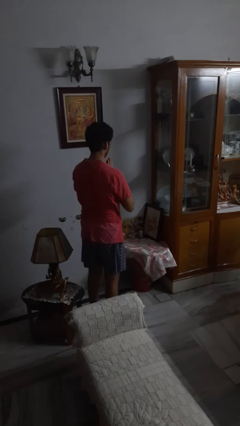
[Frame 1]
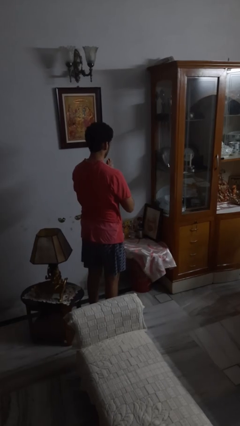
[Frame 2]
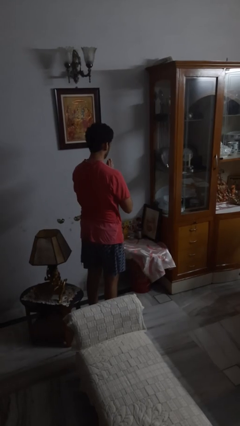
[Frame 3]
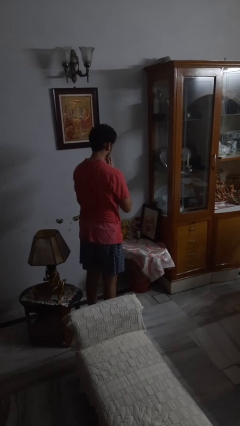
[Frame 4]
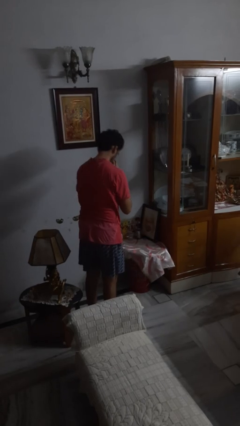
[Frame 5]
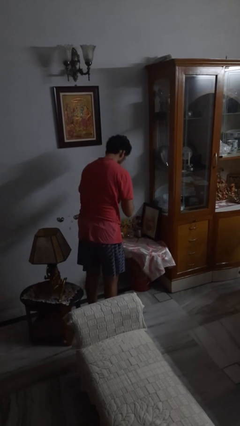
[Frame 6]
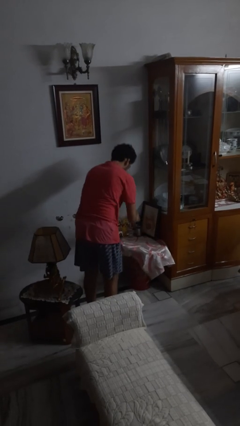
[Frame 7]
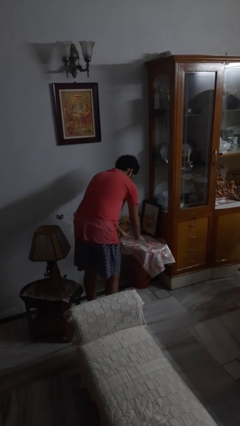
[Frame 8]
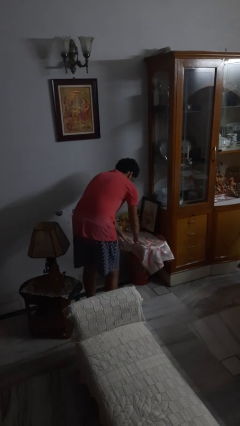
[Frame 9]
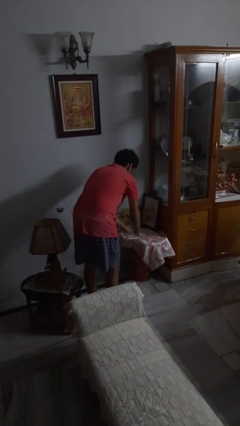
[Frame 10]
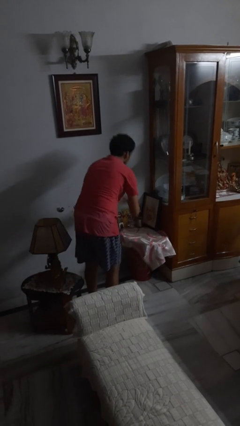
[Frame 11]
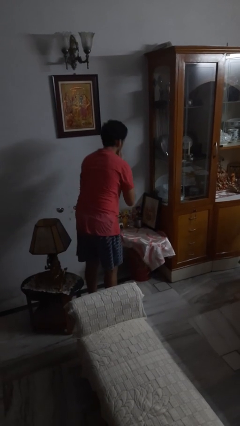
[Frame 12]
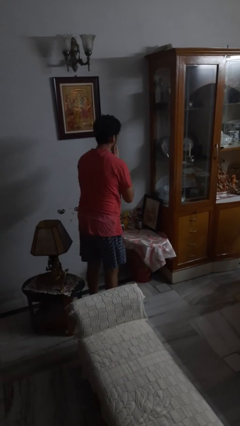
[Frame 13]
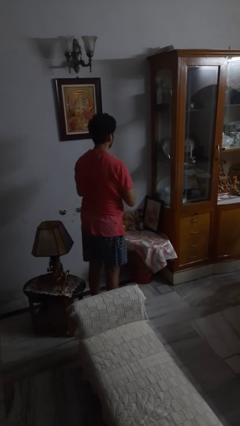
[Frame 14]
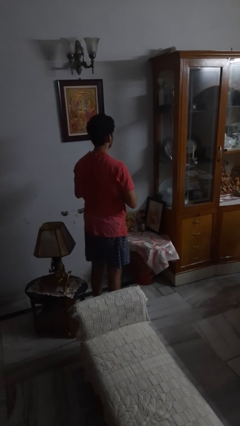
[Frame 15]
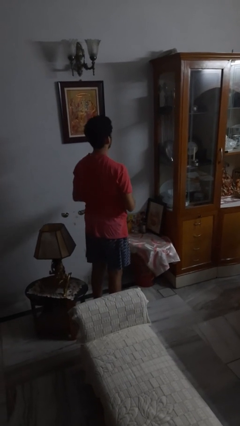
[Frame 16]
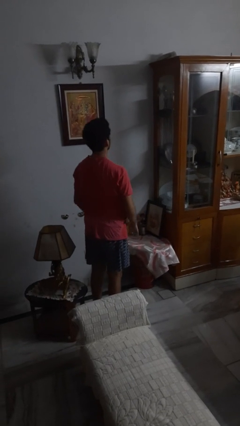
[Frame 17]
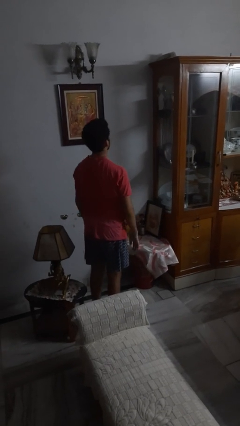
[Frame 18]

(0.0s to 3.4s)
person prays

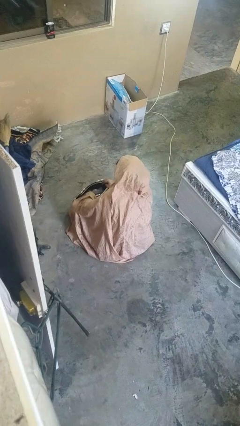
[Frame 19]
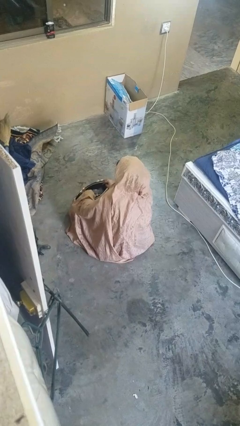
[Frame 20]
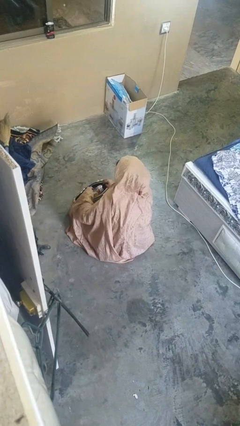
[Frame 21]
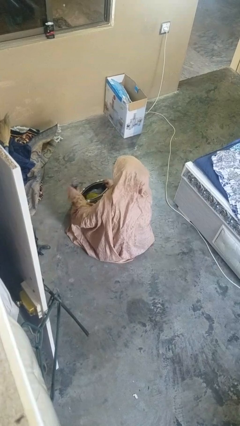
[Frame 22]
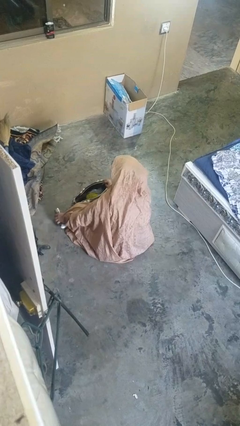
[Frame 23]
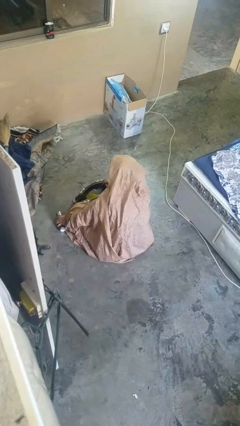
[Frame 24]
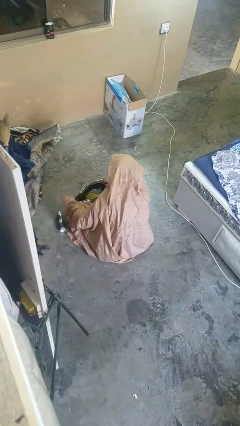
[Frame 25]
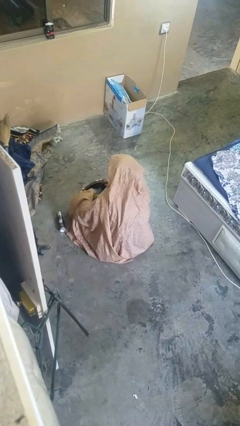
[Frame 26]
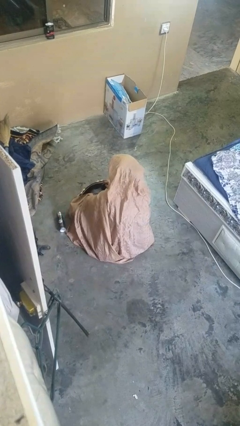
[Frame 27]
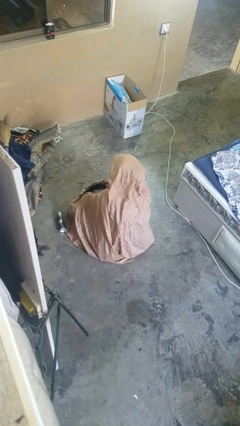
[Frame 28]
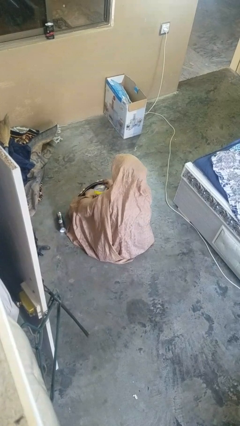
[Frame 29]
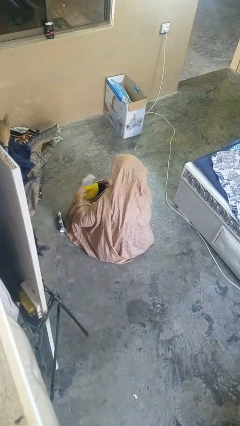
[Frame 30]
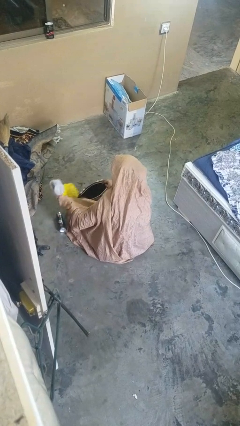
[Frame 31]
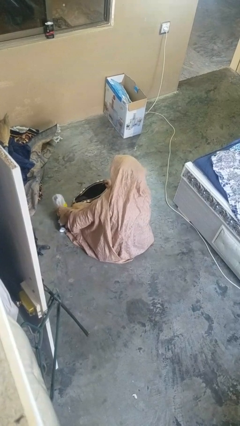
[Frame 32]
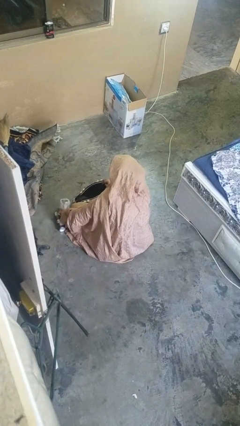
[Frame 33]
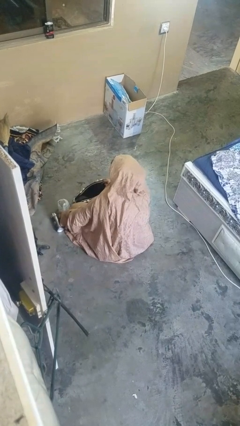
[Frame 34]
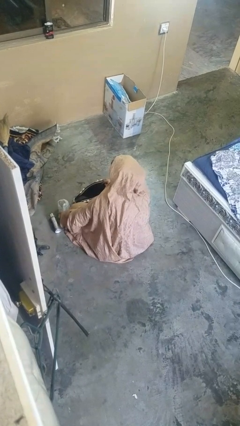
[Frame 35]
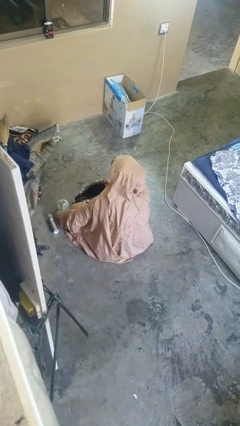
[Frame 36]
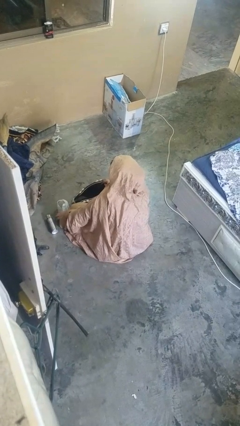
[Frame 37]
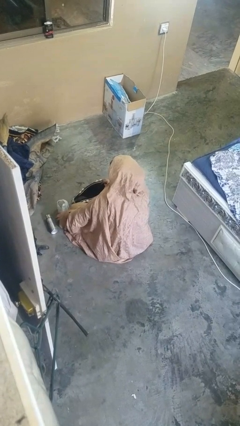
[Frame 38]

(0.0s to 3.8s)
person takes object from purse

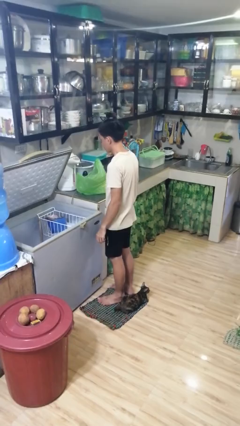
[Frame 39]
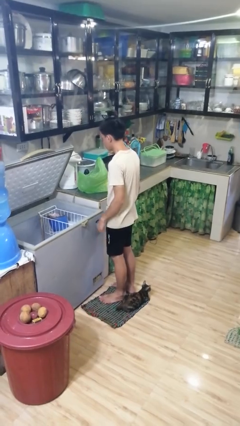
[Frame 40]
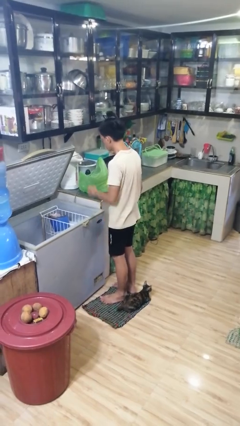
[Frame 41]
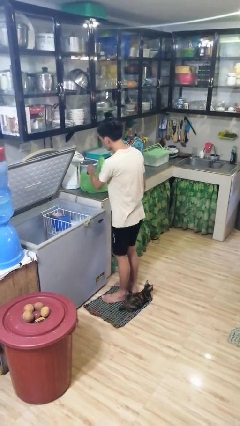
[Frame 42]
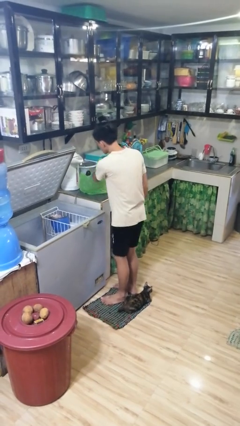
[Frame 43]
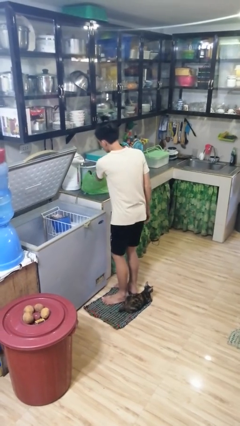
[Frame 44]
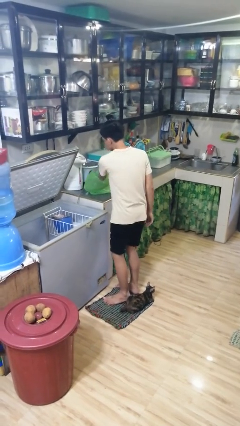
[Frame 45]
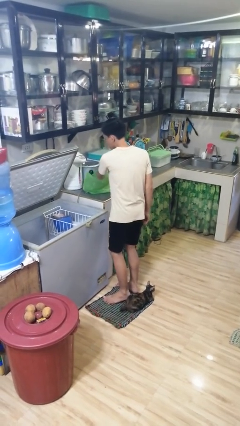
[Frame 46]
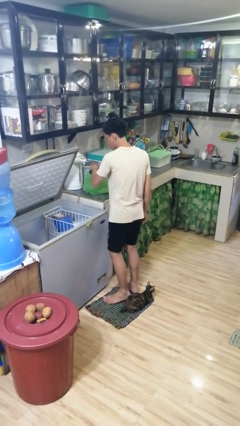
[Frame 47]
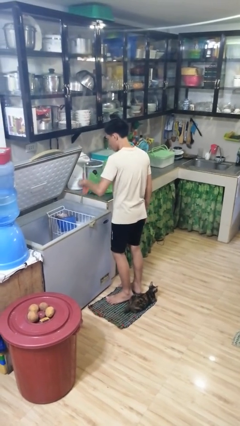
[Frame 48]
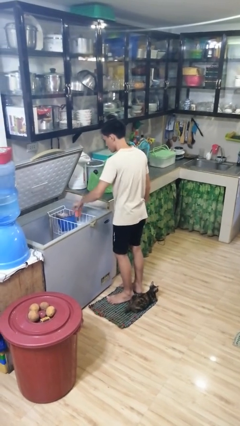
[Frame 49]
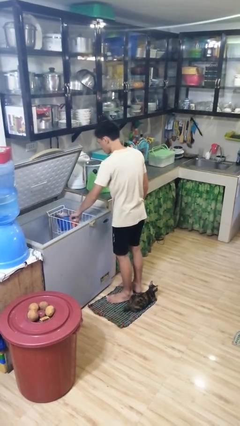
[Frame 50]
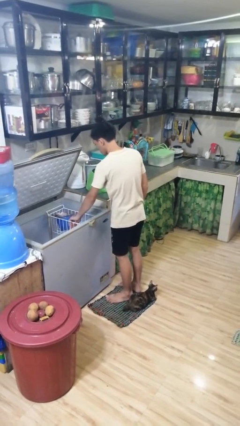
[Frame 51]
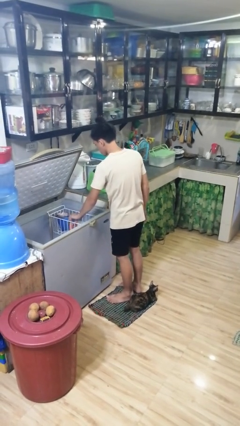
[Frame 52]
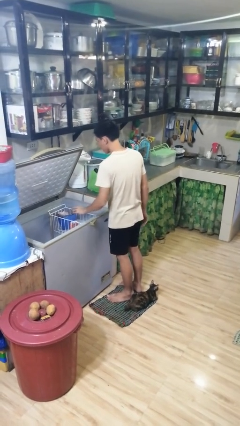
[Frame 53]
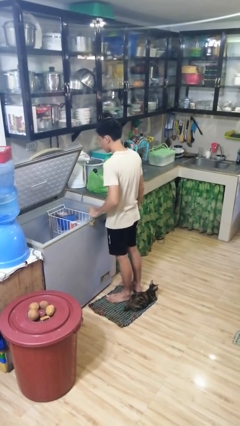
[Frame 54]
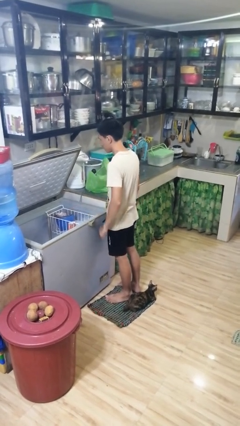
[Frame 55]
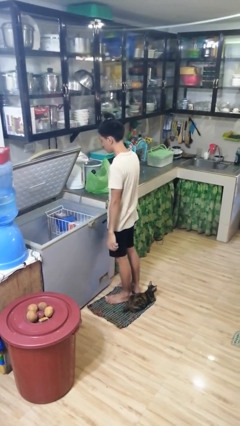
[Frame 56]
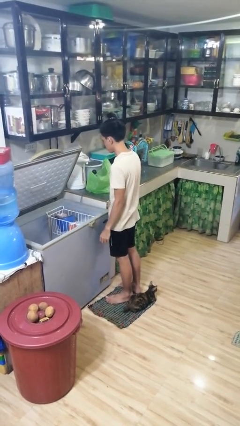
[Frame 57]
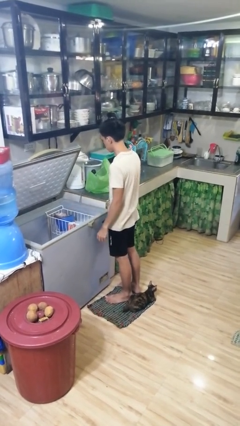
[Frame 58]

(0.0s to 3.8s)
person loads groceries into refrigerator

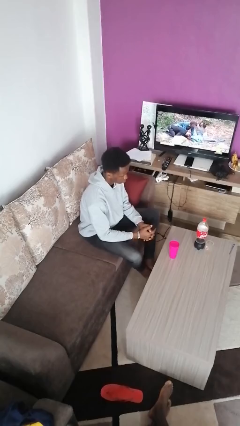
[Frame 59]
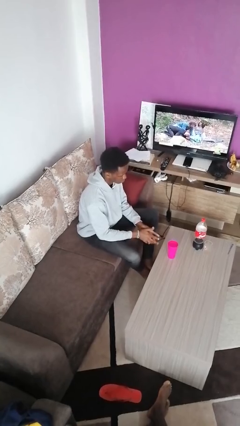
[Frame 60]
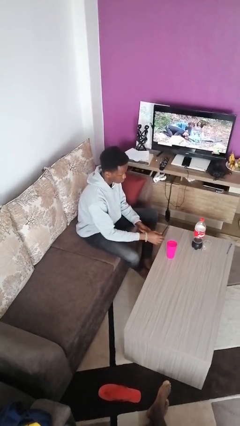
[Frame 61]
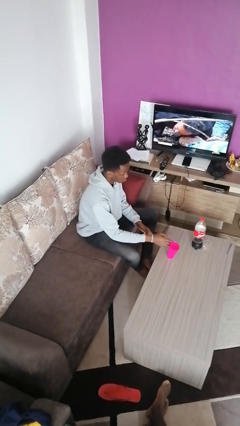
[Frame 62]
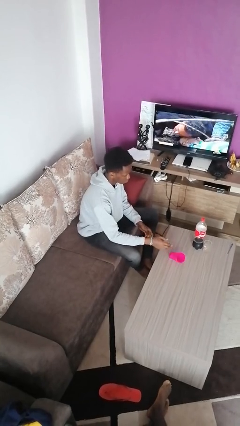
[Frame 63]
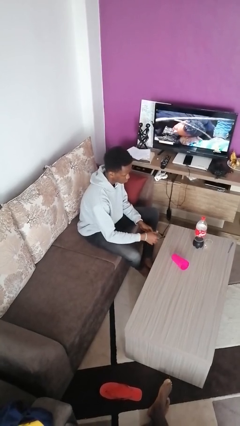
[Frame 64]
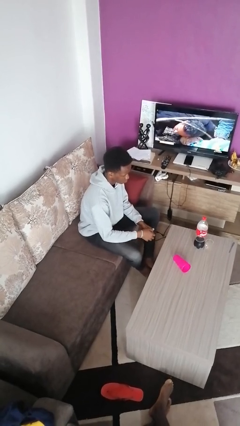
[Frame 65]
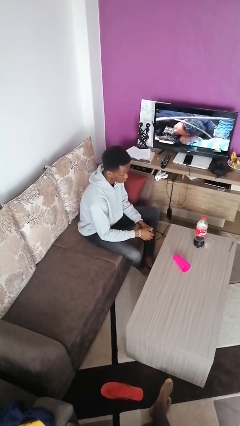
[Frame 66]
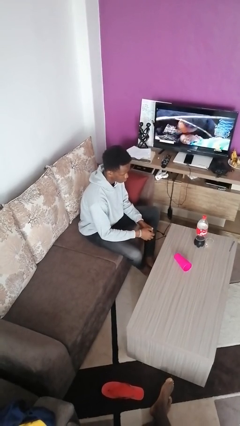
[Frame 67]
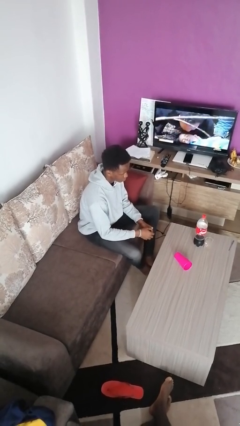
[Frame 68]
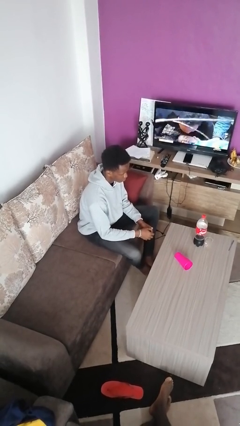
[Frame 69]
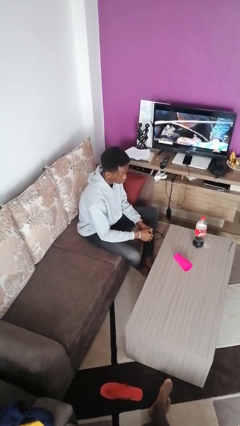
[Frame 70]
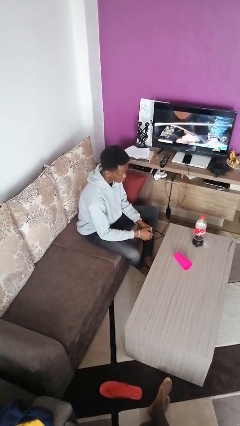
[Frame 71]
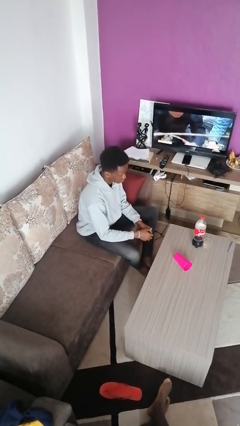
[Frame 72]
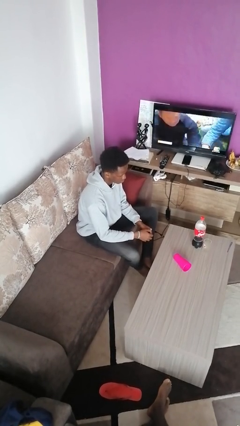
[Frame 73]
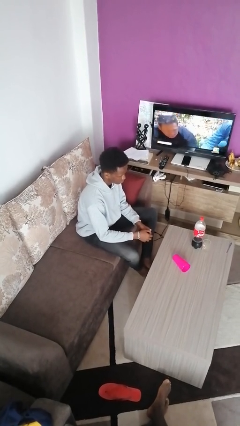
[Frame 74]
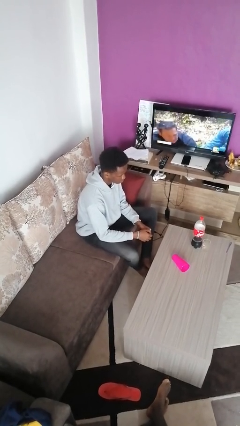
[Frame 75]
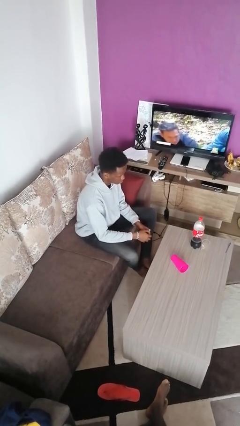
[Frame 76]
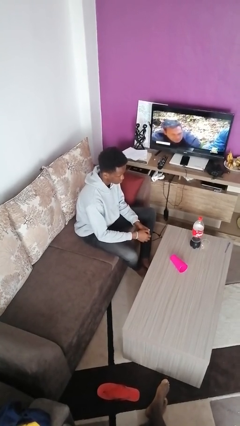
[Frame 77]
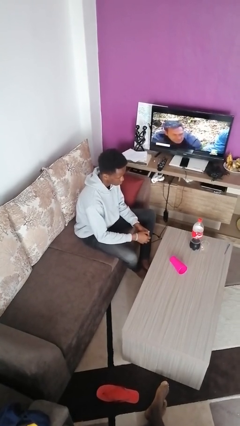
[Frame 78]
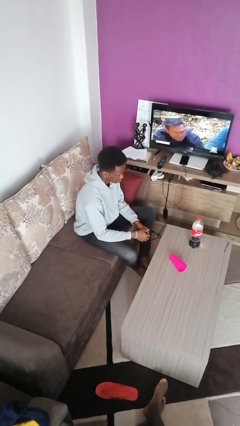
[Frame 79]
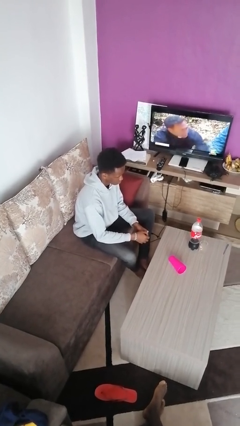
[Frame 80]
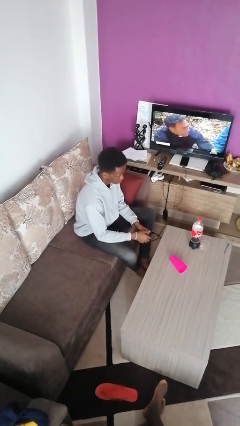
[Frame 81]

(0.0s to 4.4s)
person knocks over glass

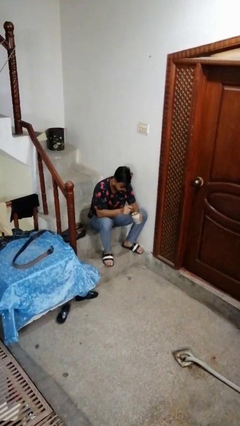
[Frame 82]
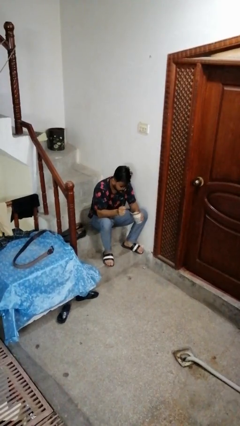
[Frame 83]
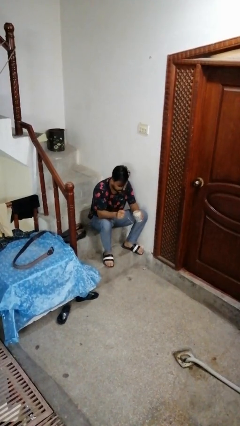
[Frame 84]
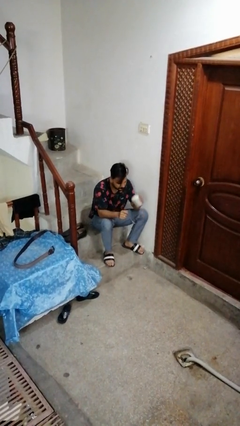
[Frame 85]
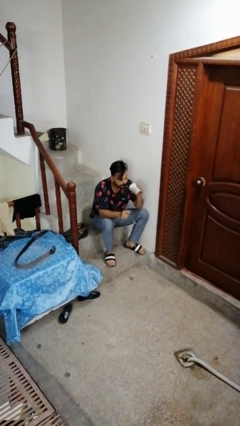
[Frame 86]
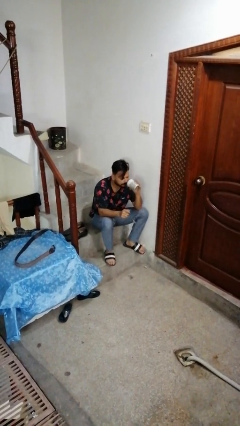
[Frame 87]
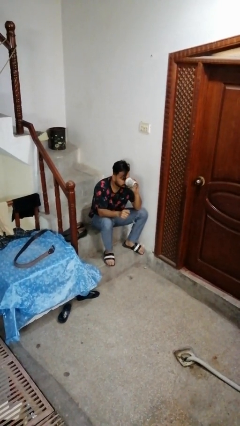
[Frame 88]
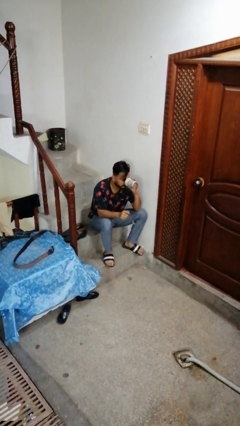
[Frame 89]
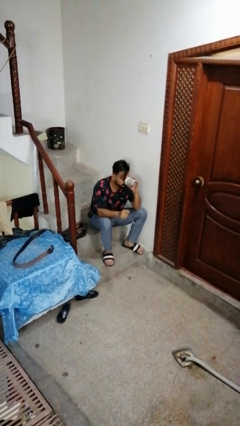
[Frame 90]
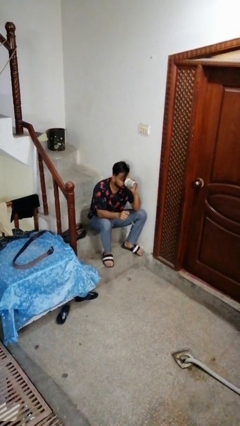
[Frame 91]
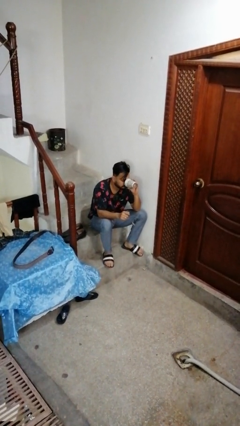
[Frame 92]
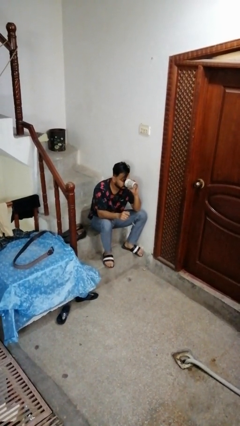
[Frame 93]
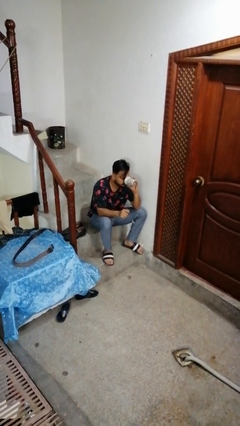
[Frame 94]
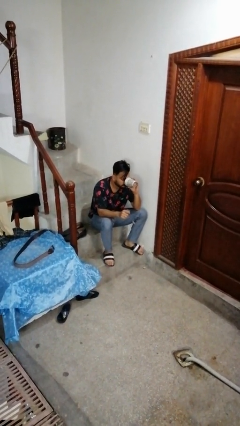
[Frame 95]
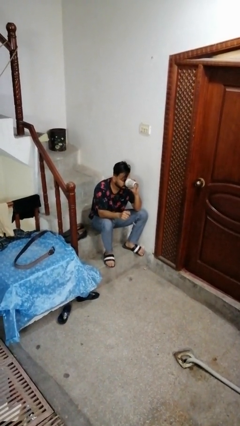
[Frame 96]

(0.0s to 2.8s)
person drinks from mug
